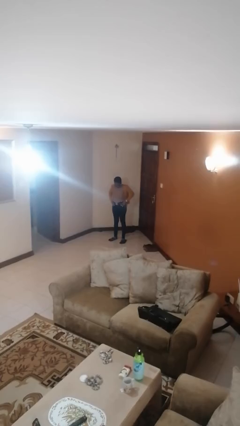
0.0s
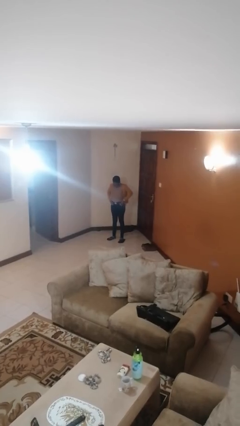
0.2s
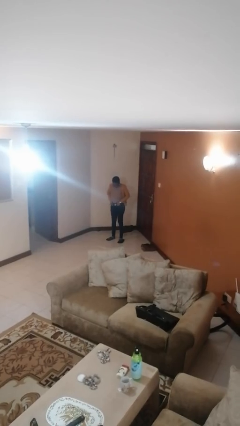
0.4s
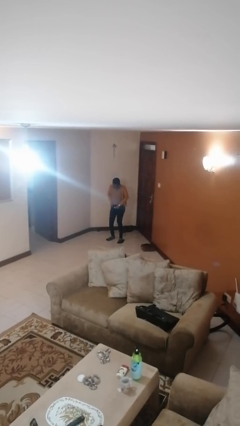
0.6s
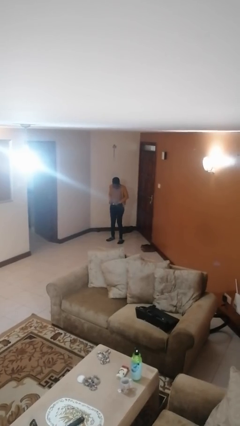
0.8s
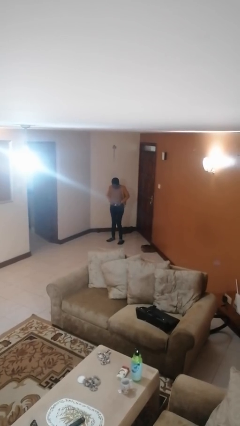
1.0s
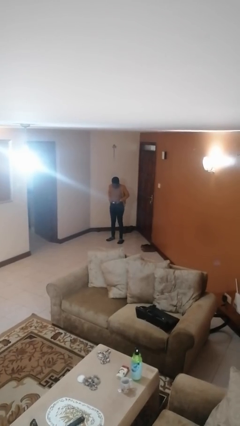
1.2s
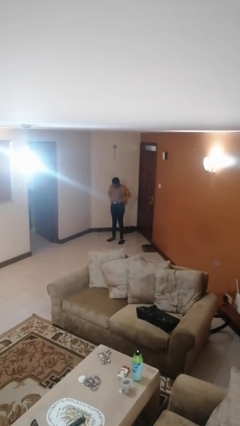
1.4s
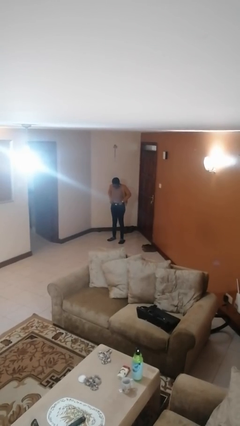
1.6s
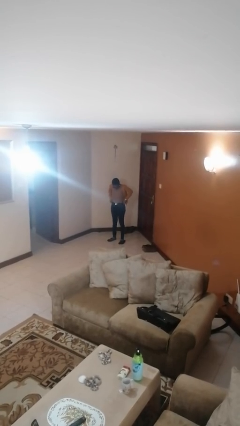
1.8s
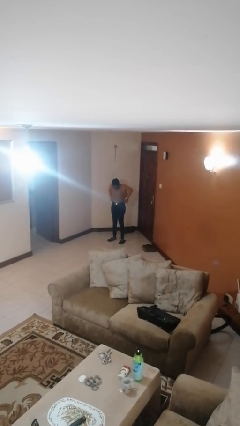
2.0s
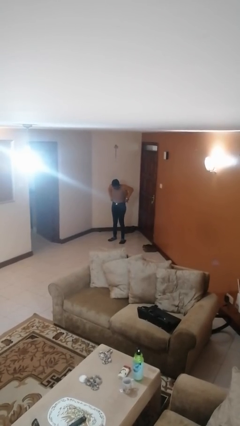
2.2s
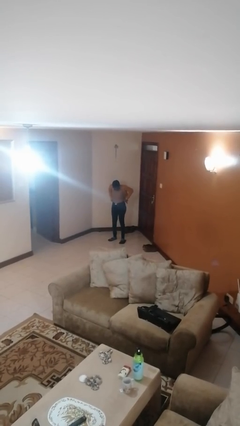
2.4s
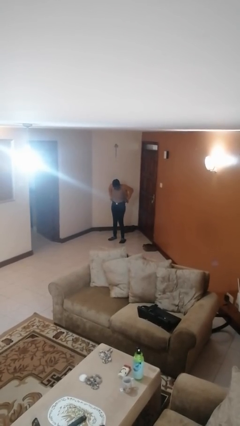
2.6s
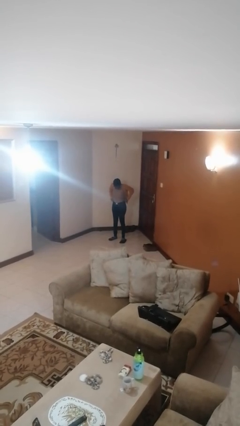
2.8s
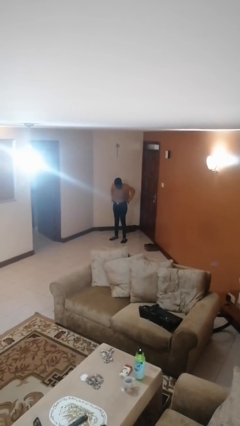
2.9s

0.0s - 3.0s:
person hikes up pants

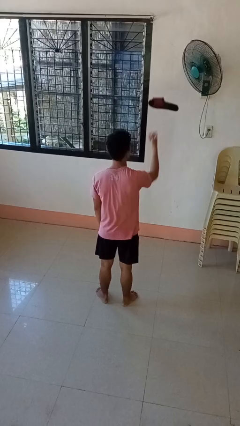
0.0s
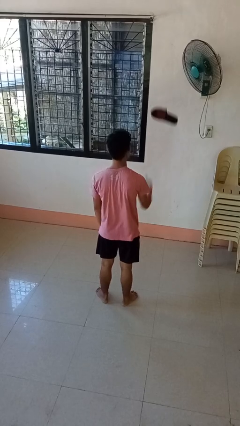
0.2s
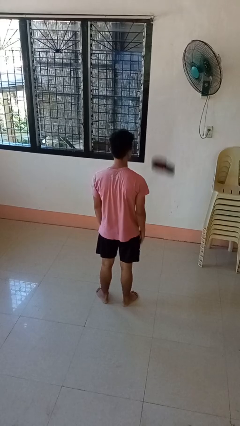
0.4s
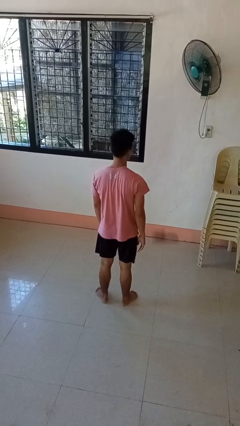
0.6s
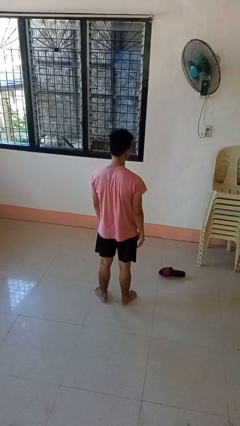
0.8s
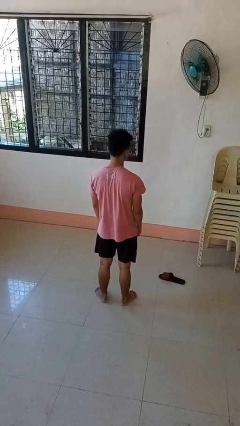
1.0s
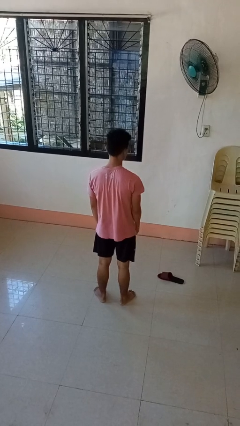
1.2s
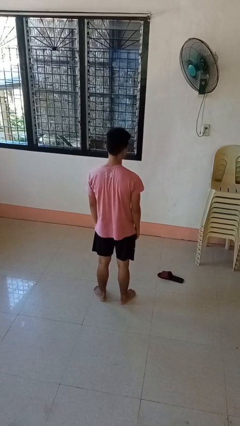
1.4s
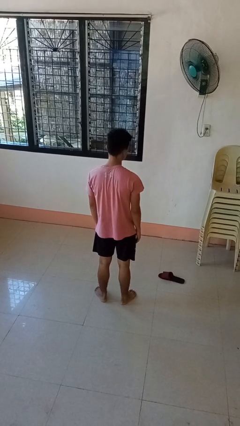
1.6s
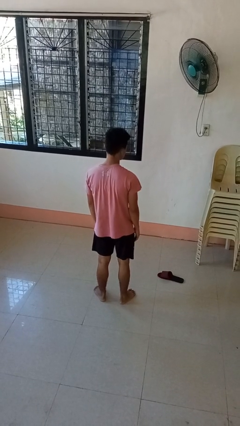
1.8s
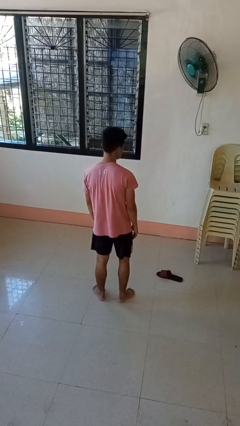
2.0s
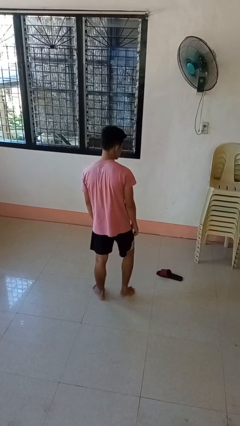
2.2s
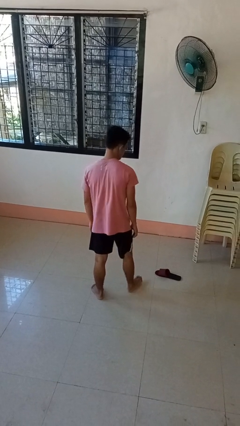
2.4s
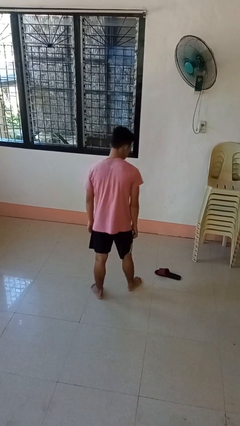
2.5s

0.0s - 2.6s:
person throws object into air

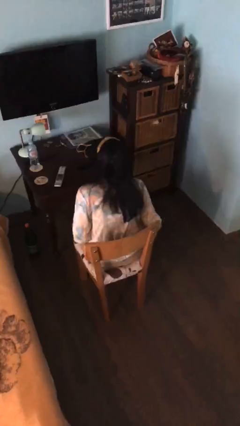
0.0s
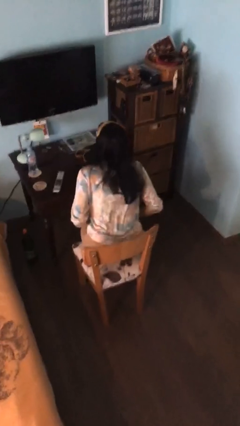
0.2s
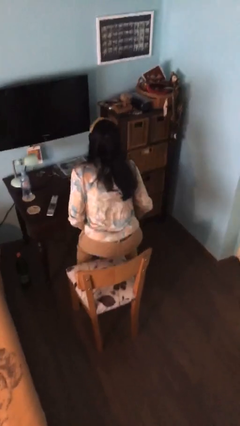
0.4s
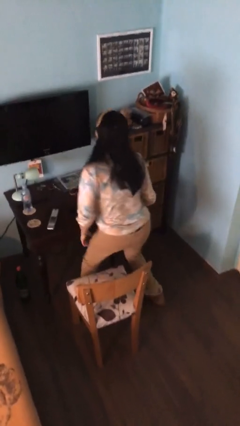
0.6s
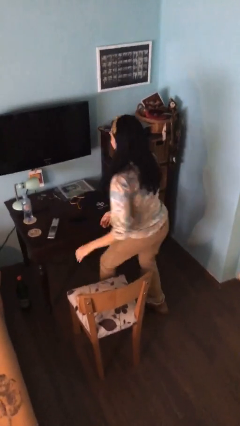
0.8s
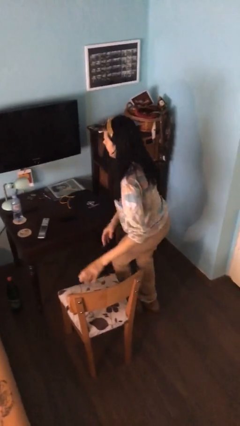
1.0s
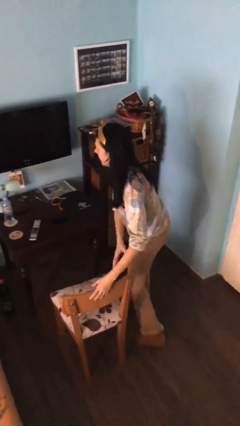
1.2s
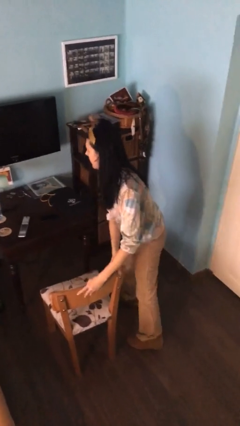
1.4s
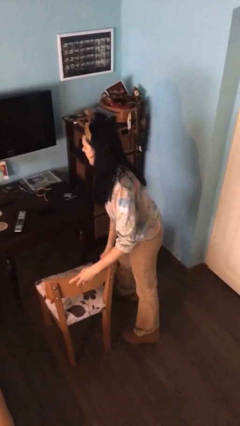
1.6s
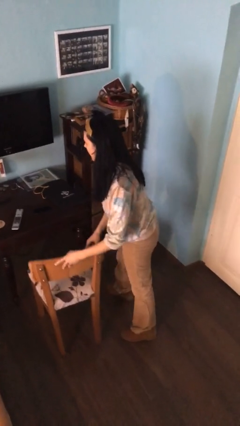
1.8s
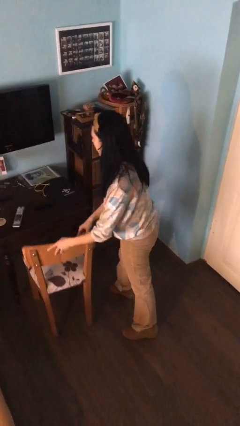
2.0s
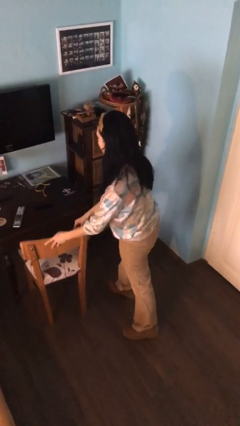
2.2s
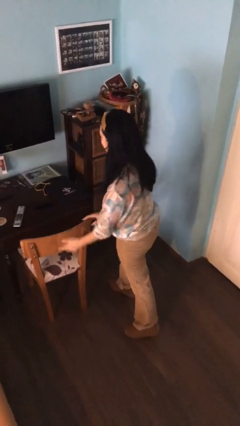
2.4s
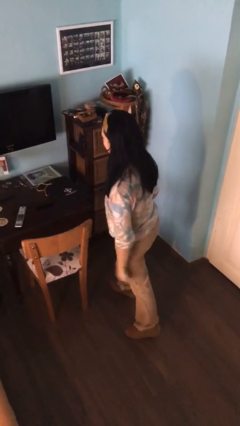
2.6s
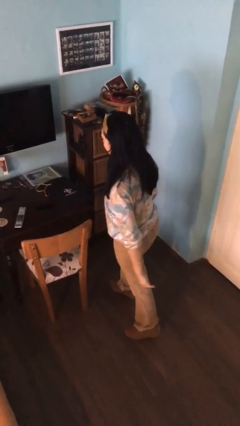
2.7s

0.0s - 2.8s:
person stands up

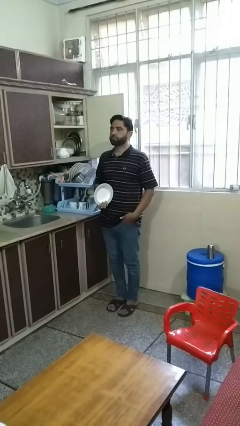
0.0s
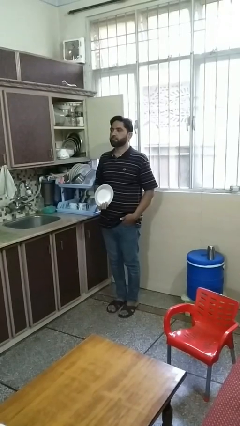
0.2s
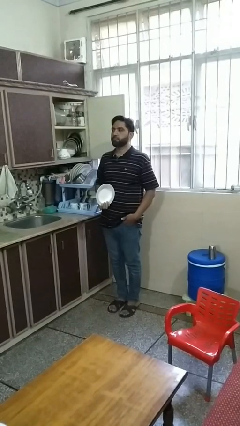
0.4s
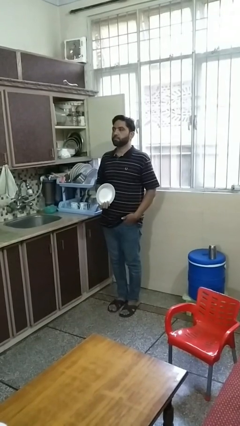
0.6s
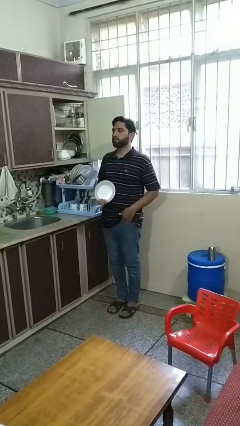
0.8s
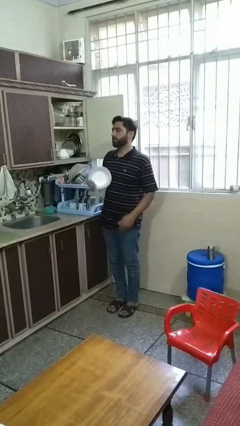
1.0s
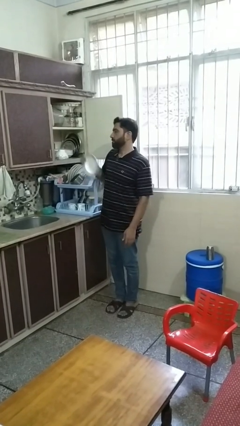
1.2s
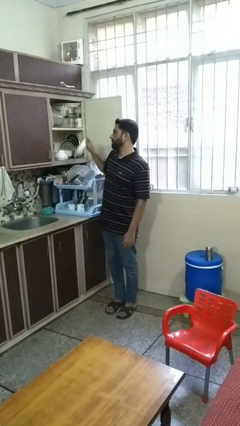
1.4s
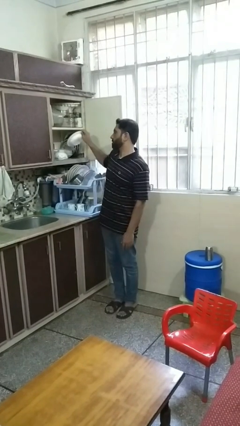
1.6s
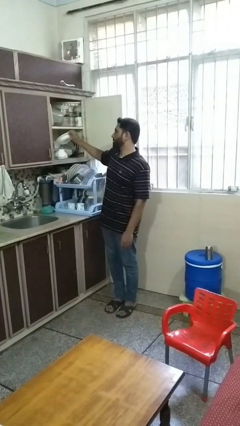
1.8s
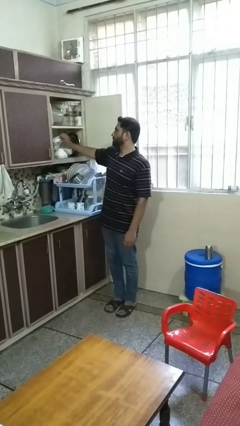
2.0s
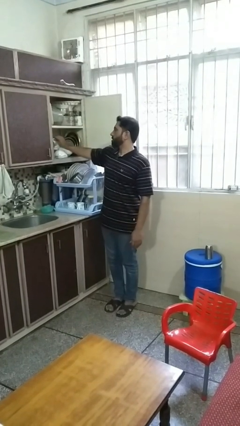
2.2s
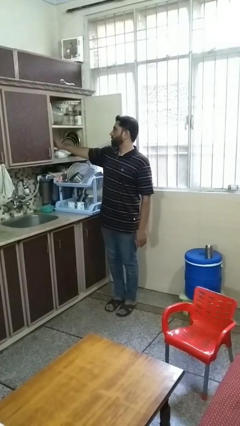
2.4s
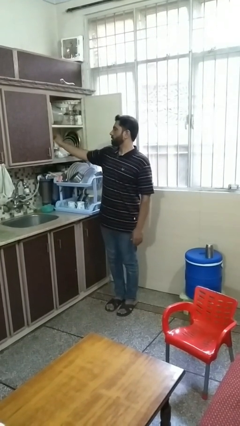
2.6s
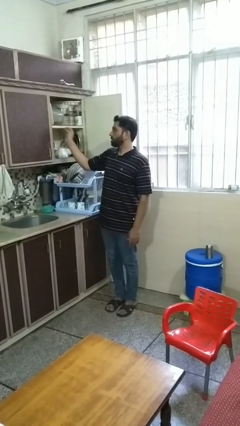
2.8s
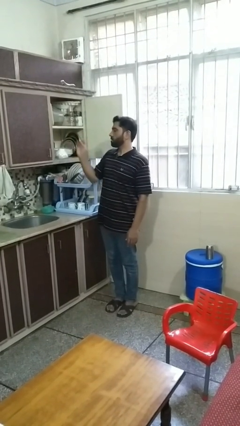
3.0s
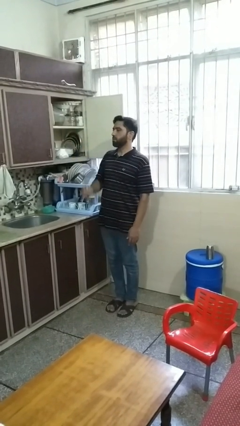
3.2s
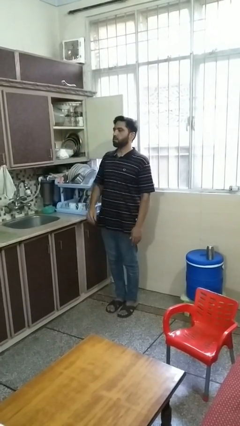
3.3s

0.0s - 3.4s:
person puts object in cabinet

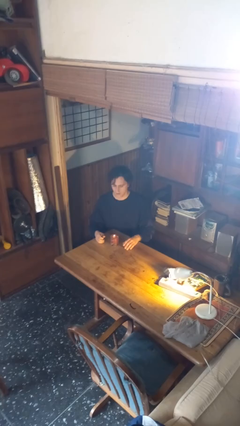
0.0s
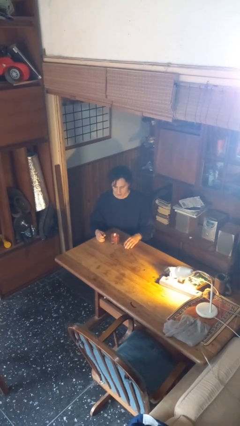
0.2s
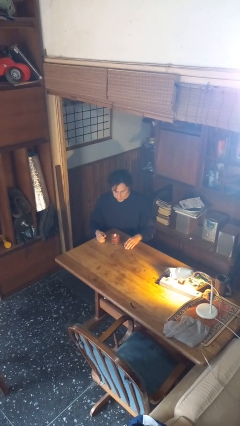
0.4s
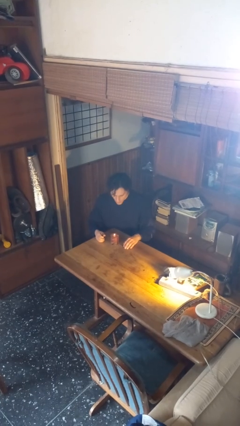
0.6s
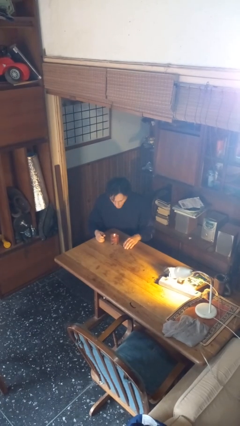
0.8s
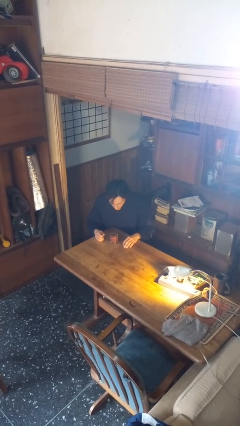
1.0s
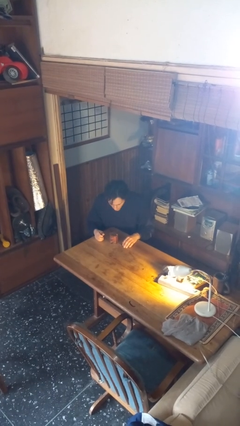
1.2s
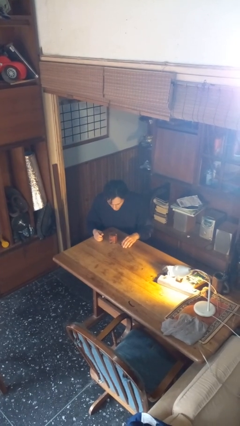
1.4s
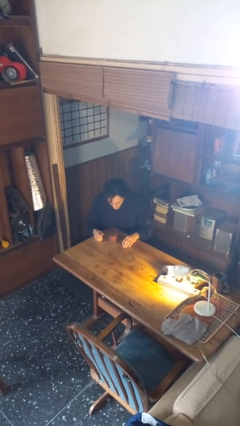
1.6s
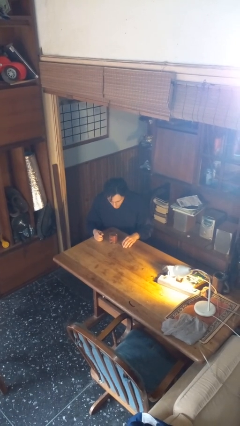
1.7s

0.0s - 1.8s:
person extinguishes candle

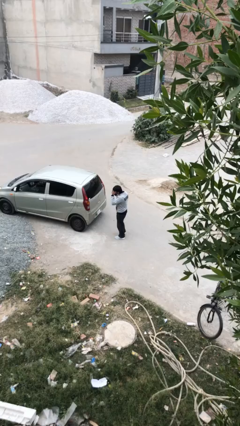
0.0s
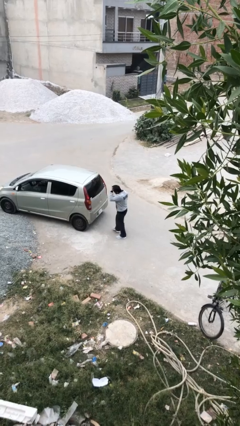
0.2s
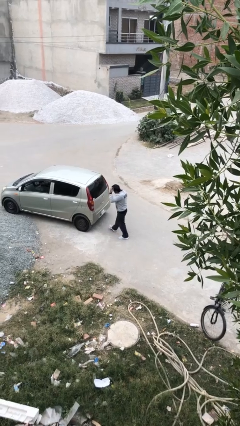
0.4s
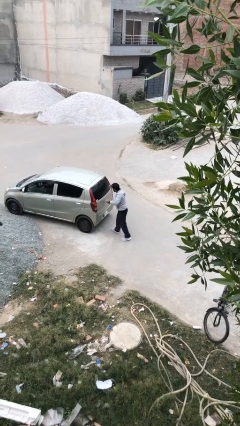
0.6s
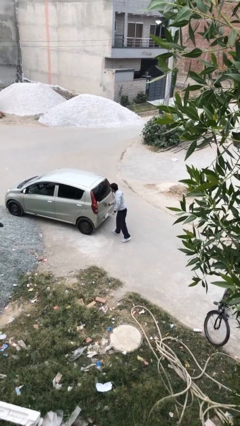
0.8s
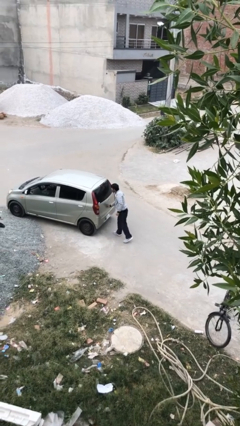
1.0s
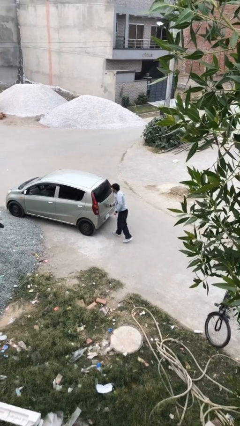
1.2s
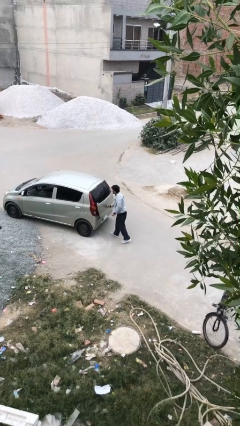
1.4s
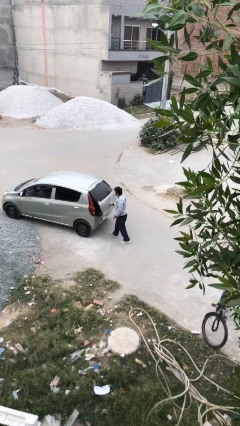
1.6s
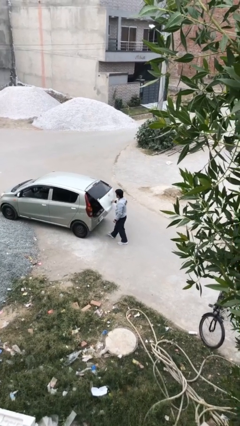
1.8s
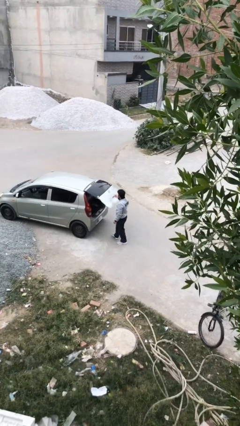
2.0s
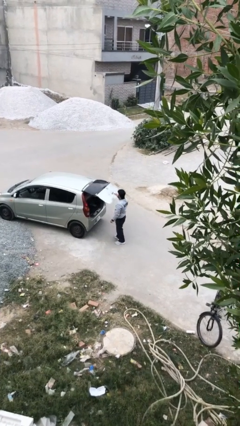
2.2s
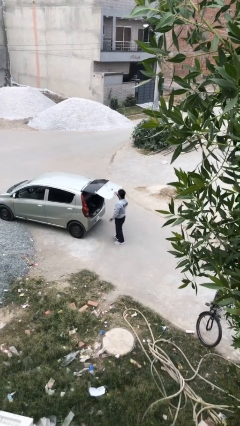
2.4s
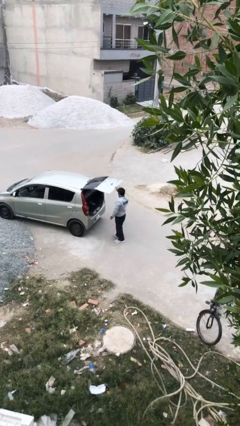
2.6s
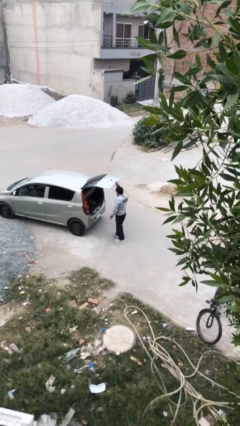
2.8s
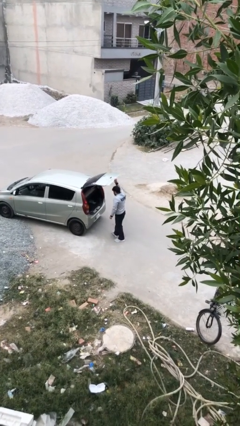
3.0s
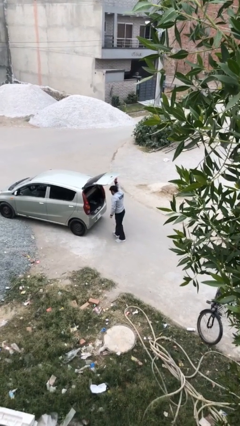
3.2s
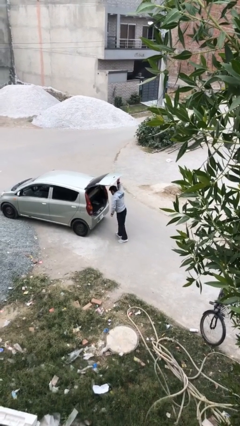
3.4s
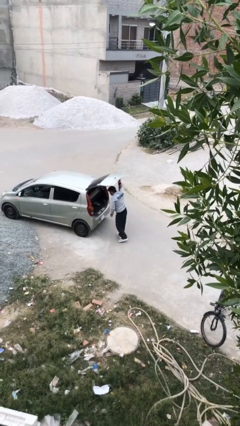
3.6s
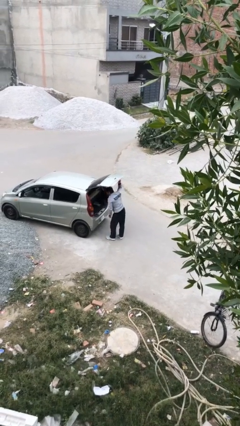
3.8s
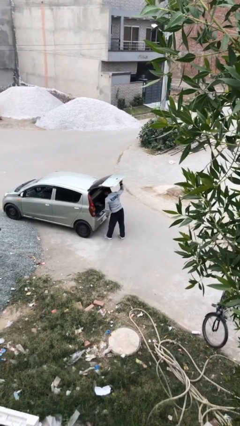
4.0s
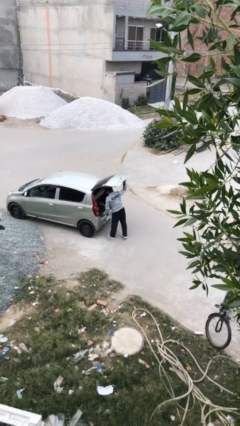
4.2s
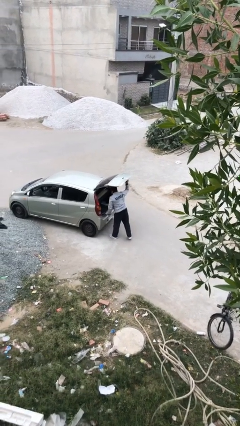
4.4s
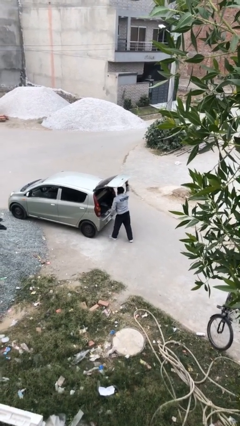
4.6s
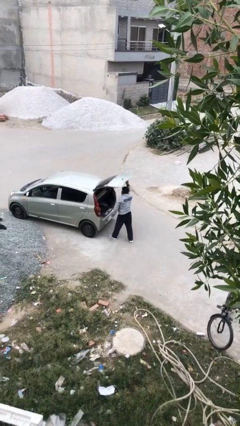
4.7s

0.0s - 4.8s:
person opens car trunk
